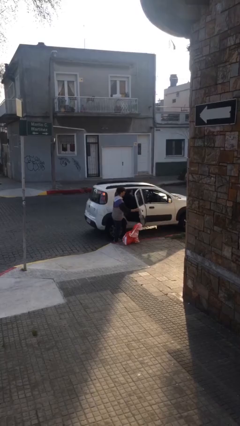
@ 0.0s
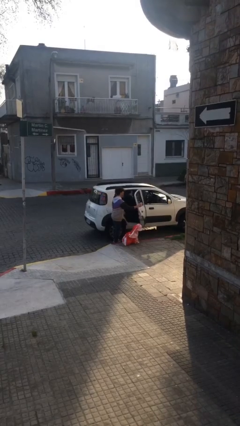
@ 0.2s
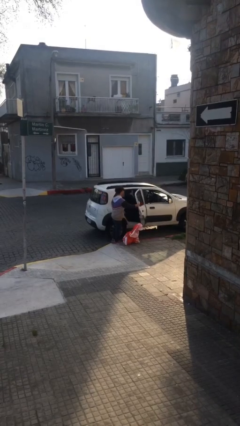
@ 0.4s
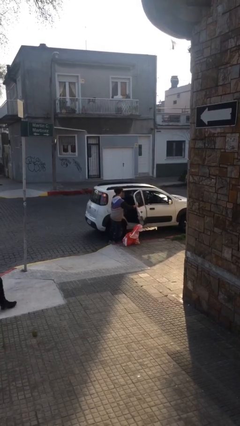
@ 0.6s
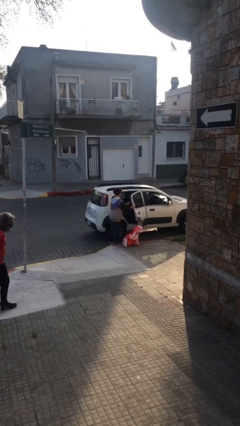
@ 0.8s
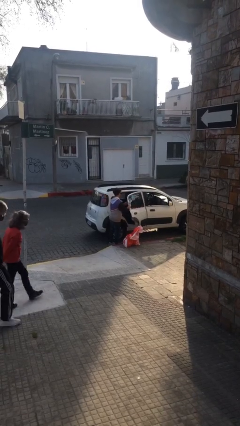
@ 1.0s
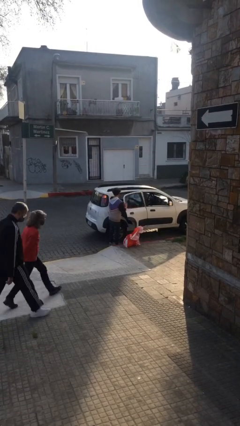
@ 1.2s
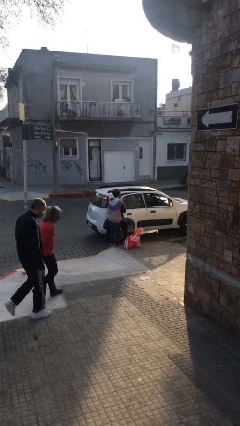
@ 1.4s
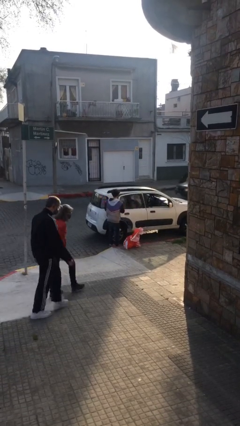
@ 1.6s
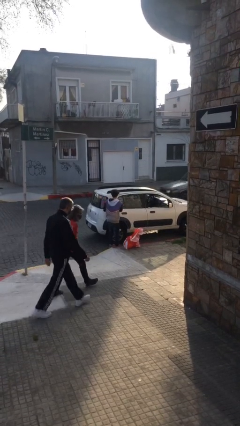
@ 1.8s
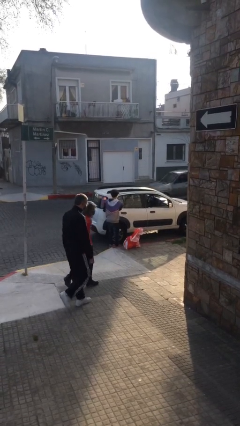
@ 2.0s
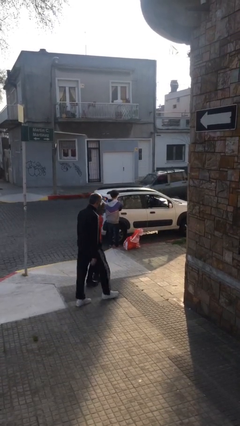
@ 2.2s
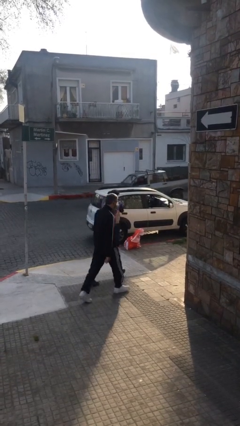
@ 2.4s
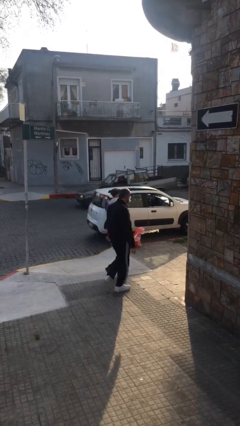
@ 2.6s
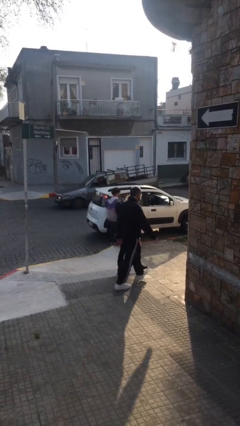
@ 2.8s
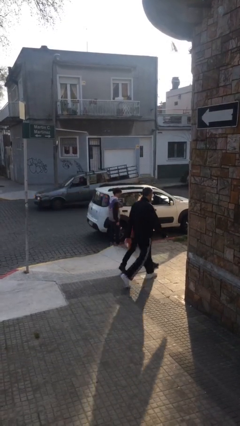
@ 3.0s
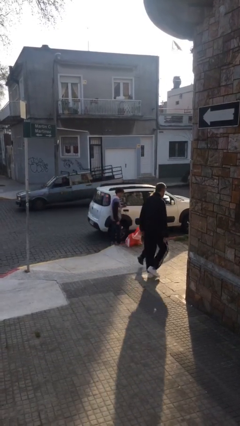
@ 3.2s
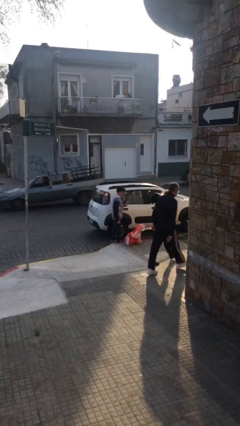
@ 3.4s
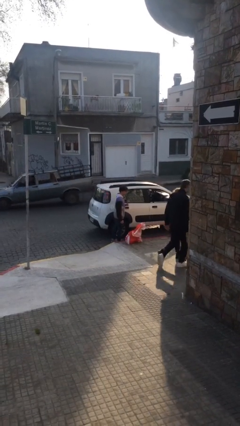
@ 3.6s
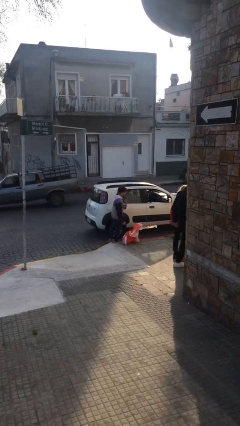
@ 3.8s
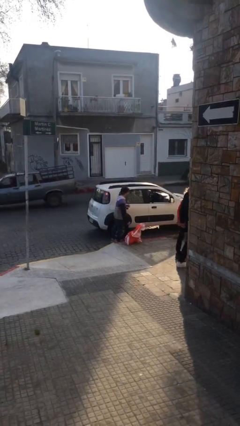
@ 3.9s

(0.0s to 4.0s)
person closes car door

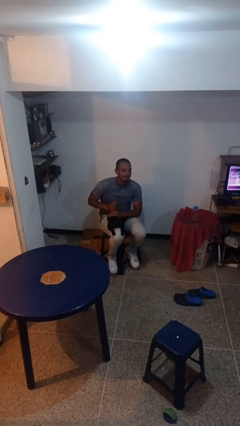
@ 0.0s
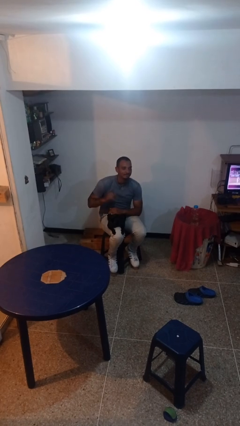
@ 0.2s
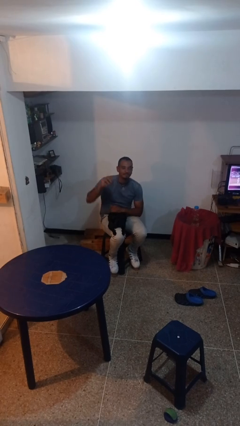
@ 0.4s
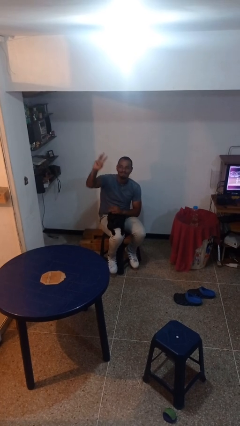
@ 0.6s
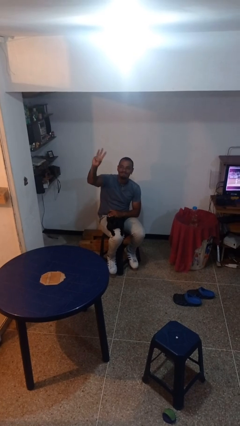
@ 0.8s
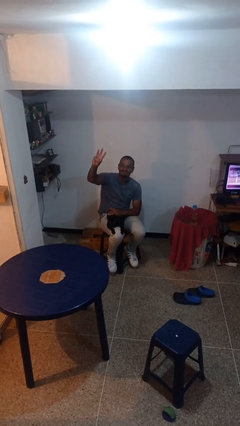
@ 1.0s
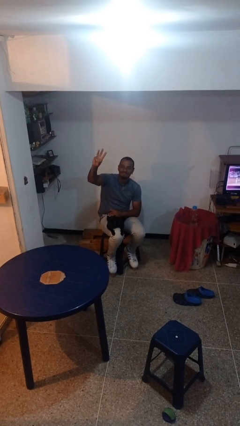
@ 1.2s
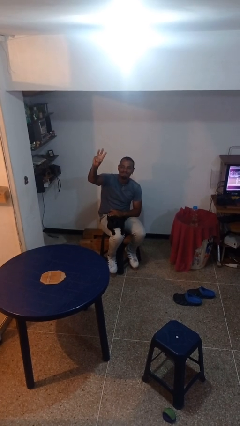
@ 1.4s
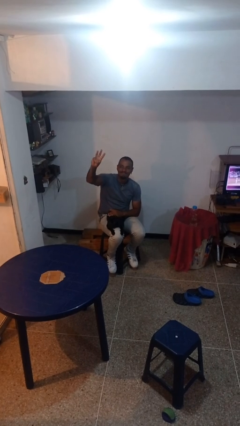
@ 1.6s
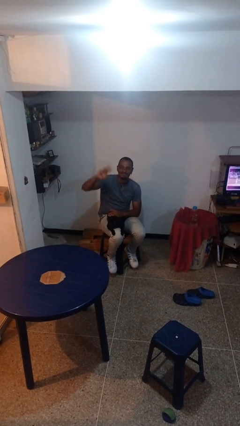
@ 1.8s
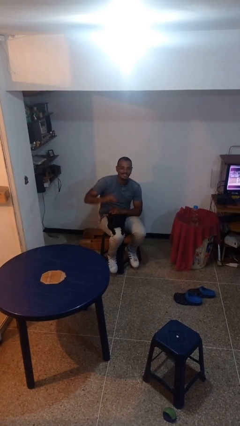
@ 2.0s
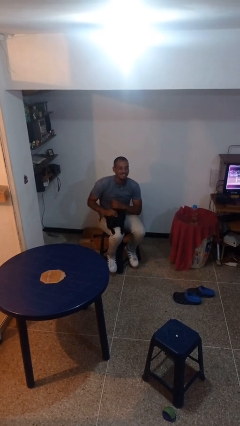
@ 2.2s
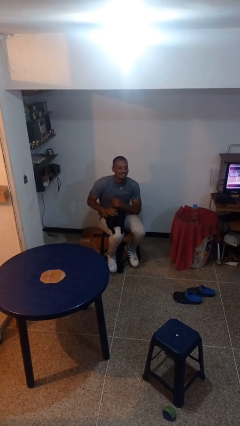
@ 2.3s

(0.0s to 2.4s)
person gestures number three

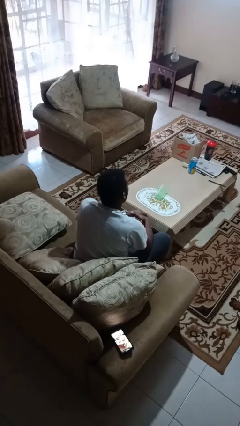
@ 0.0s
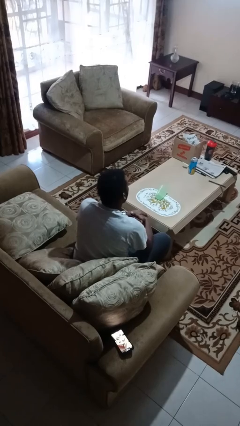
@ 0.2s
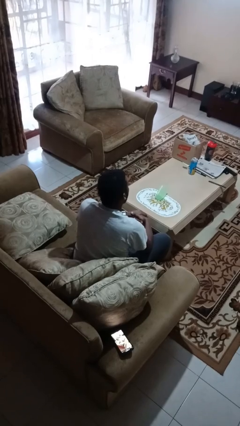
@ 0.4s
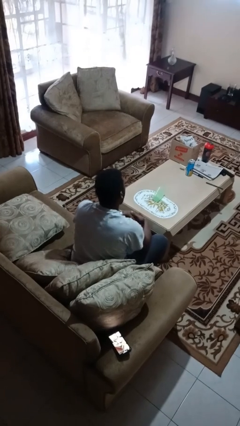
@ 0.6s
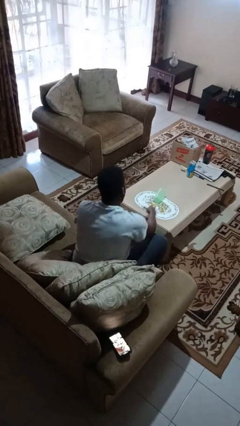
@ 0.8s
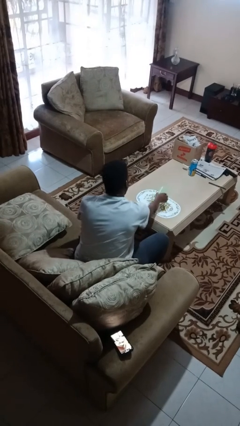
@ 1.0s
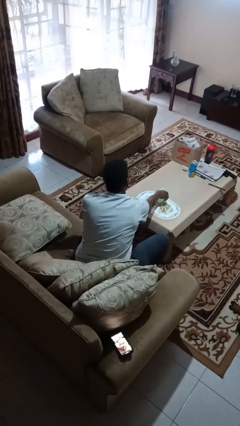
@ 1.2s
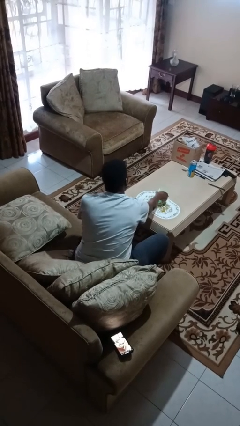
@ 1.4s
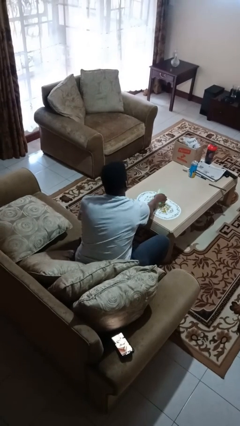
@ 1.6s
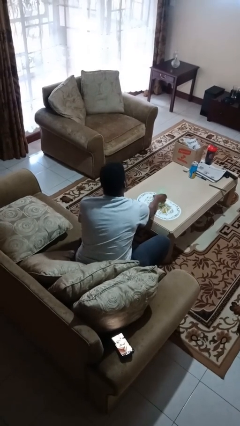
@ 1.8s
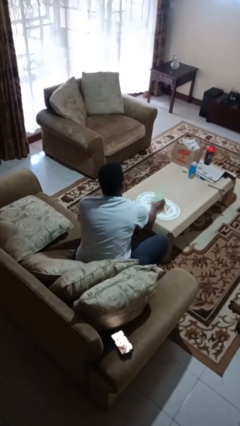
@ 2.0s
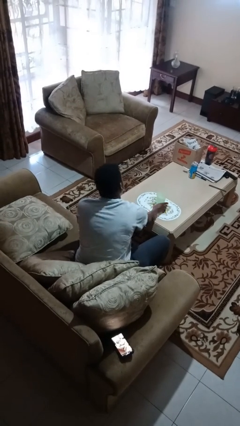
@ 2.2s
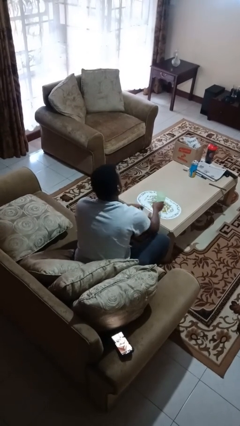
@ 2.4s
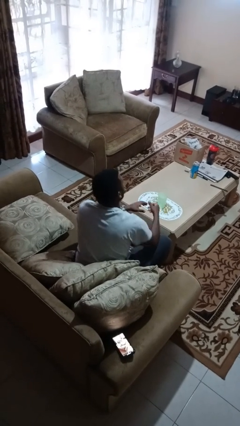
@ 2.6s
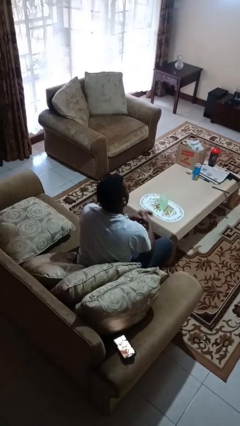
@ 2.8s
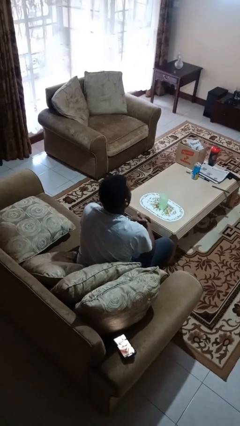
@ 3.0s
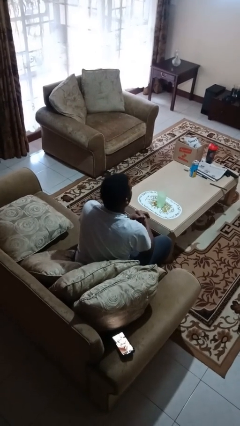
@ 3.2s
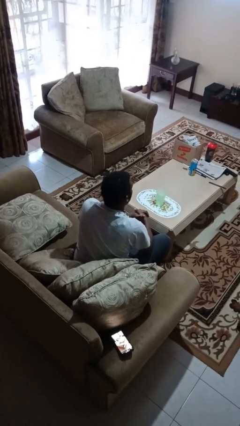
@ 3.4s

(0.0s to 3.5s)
person sets upright glass

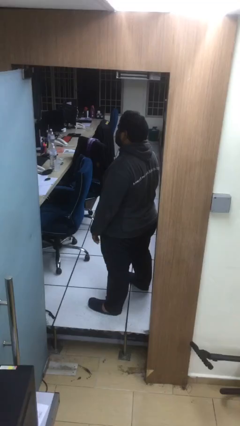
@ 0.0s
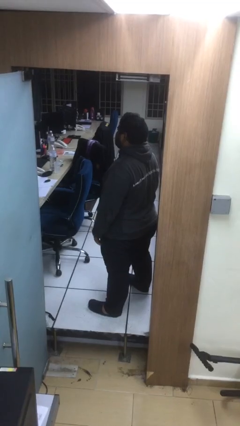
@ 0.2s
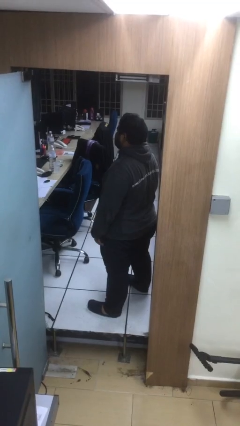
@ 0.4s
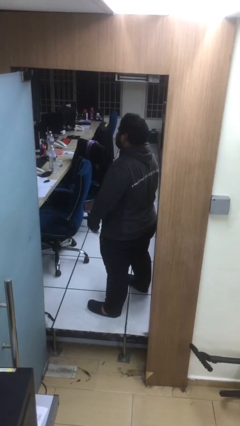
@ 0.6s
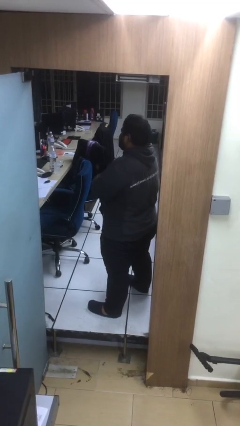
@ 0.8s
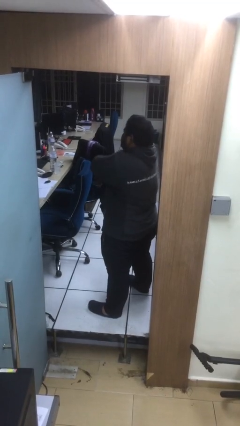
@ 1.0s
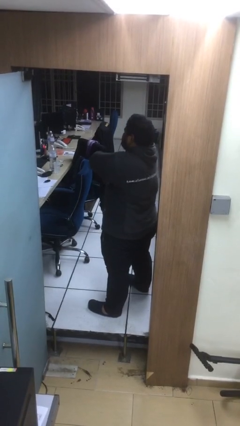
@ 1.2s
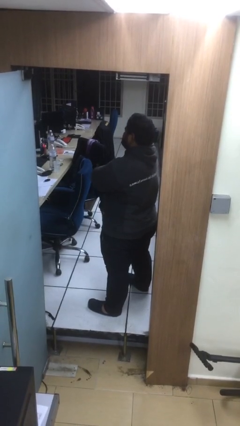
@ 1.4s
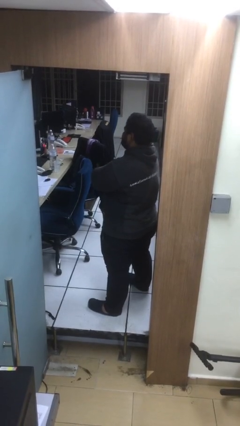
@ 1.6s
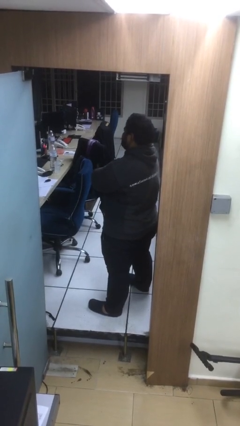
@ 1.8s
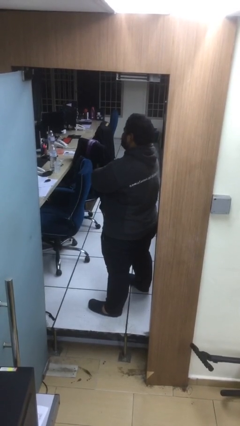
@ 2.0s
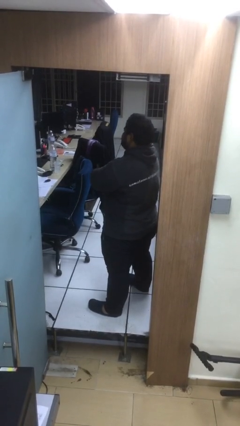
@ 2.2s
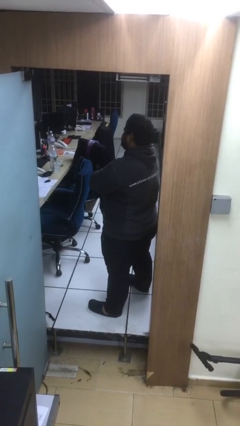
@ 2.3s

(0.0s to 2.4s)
person crosses arms

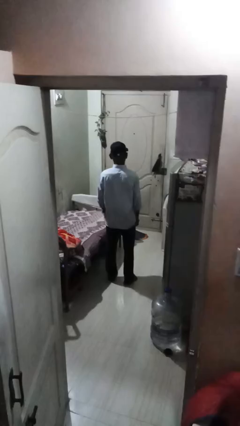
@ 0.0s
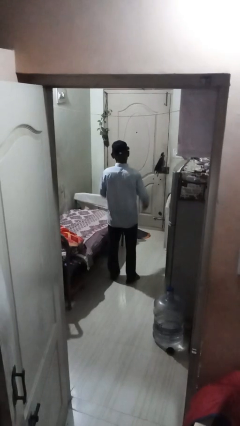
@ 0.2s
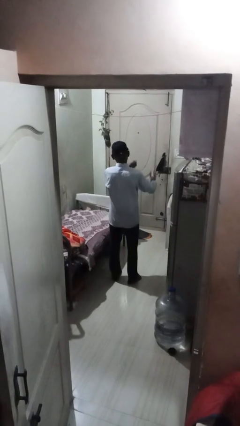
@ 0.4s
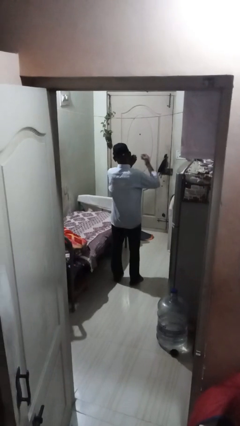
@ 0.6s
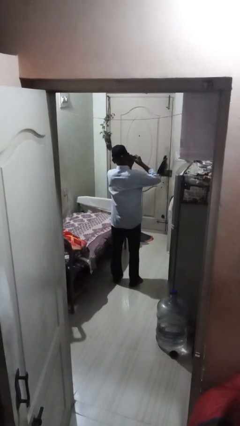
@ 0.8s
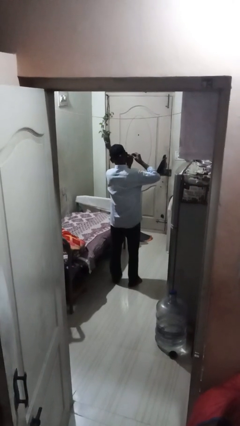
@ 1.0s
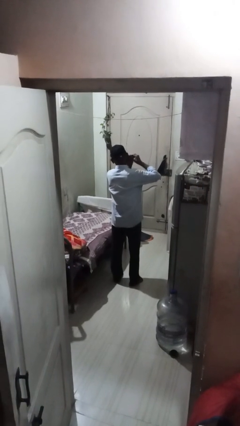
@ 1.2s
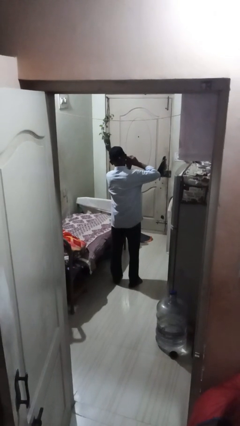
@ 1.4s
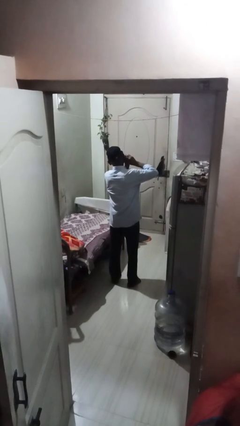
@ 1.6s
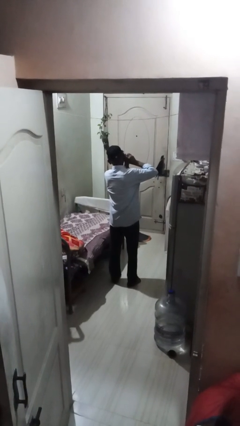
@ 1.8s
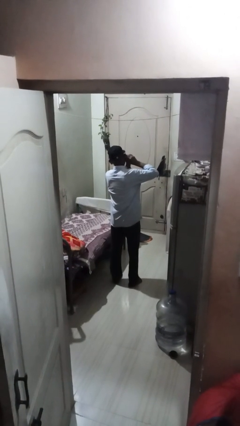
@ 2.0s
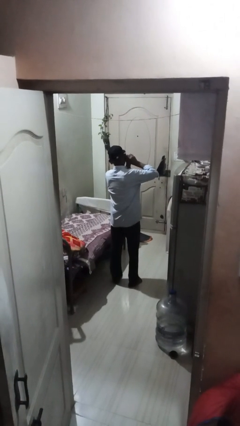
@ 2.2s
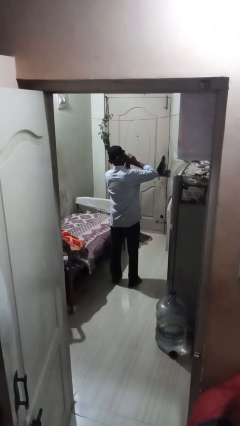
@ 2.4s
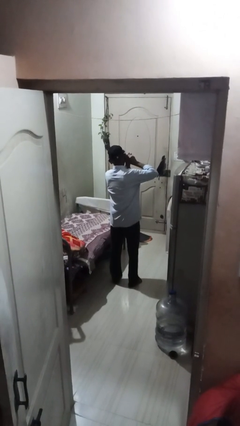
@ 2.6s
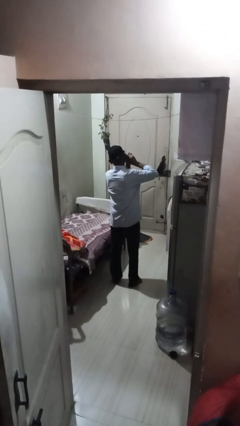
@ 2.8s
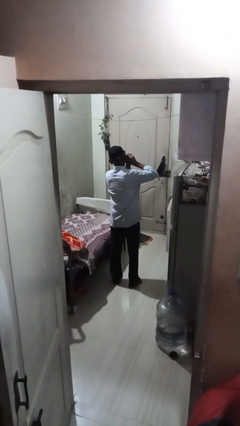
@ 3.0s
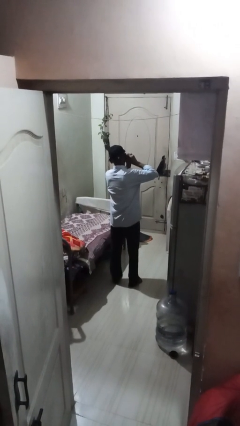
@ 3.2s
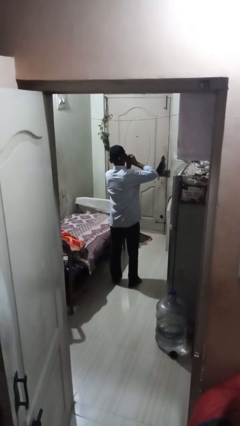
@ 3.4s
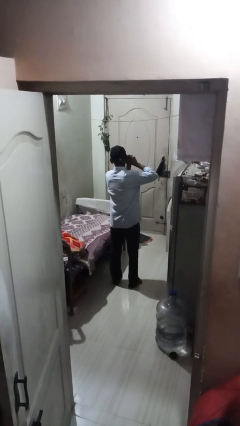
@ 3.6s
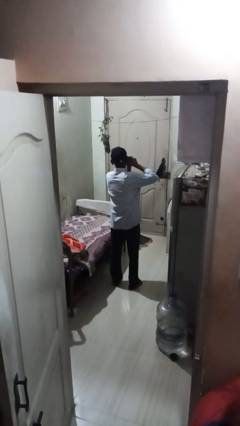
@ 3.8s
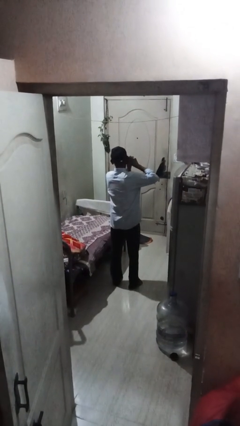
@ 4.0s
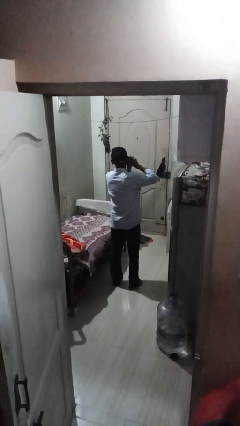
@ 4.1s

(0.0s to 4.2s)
person puts on earrings

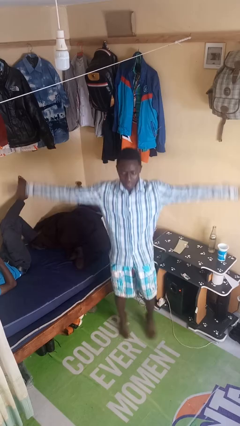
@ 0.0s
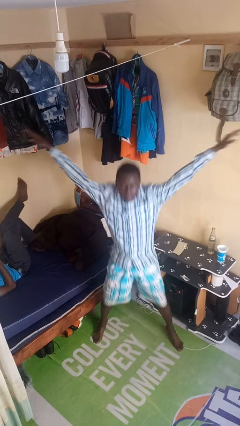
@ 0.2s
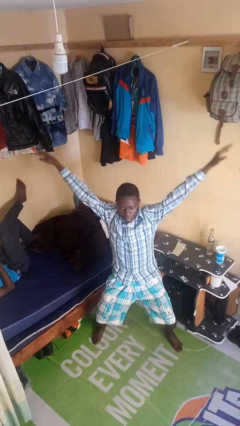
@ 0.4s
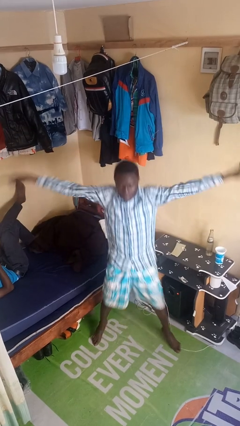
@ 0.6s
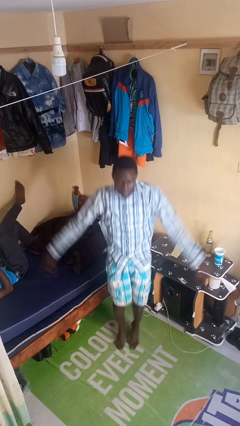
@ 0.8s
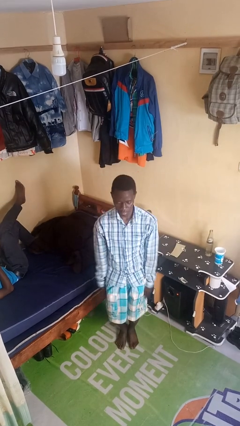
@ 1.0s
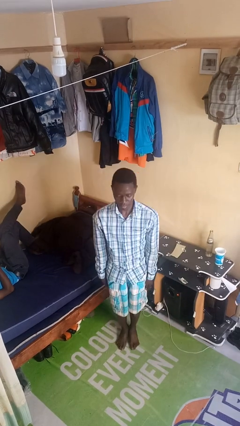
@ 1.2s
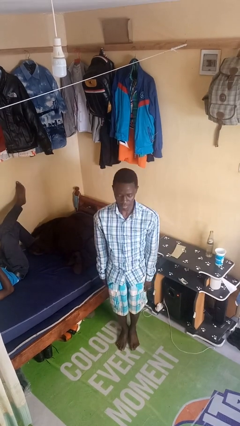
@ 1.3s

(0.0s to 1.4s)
person exercises with jumping jacks
